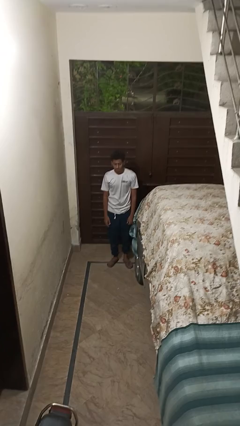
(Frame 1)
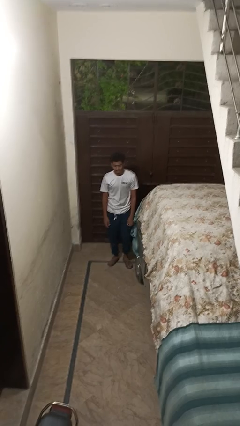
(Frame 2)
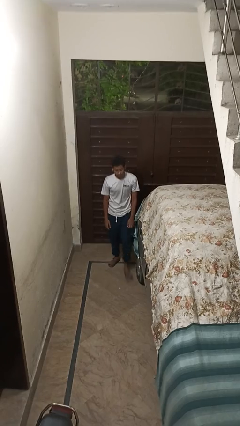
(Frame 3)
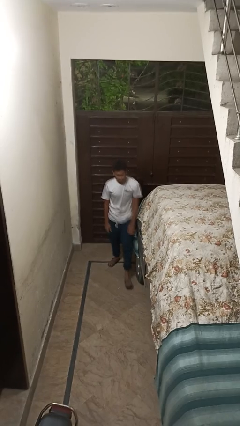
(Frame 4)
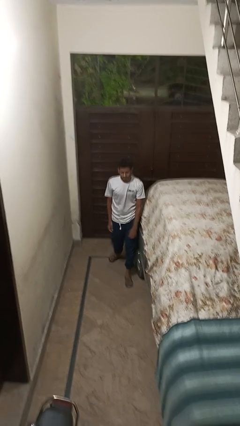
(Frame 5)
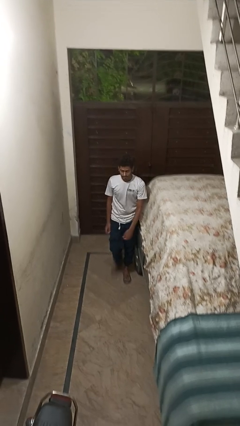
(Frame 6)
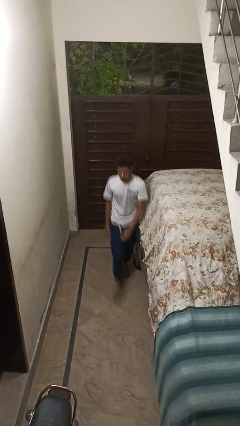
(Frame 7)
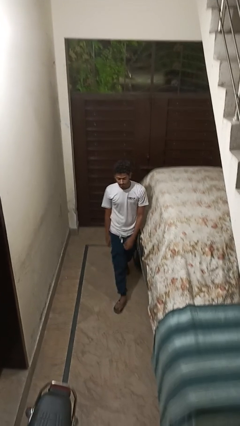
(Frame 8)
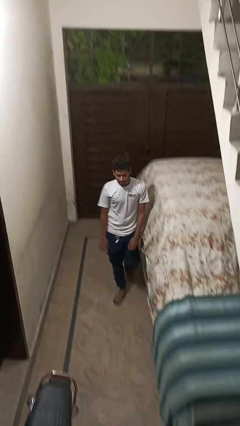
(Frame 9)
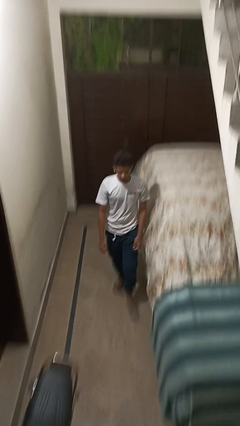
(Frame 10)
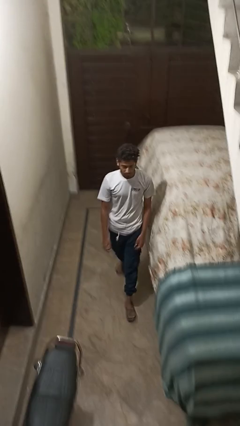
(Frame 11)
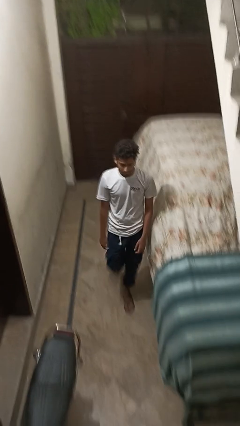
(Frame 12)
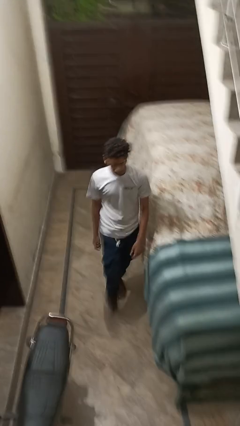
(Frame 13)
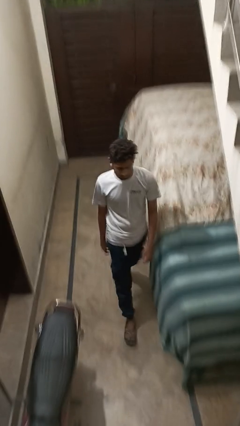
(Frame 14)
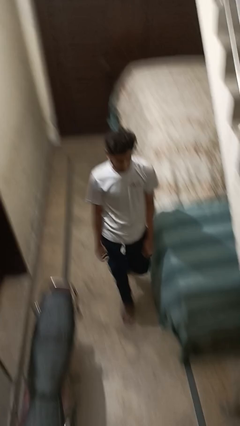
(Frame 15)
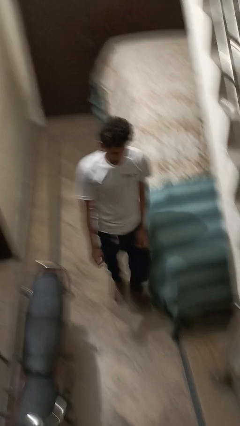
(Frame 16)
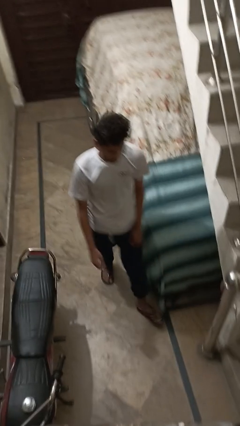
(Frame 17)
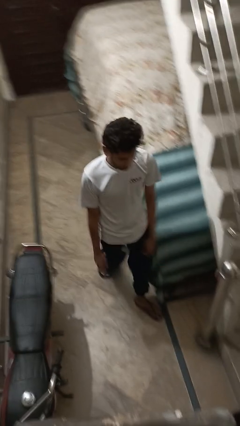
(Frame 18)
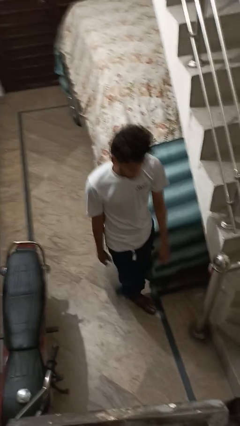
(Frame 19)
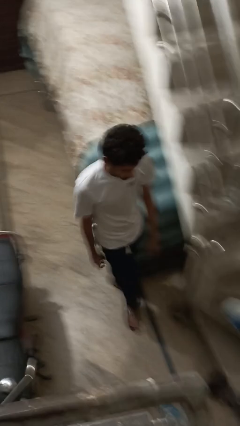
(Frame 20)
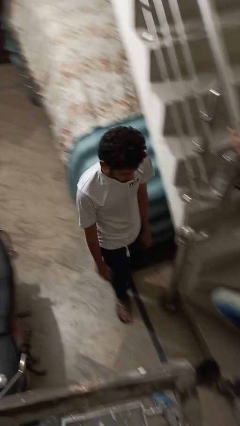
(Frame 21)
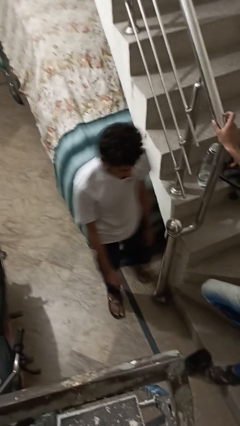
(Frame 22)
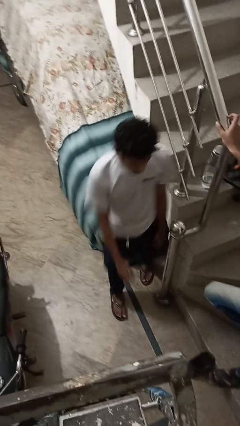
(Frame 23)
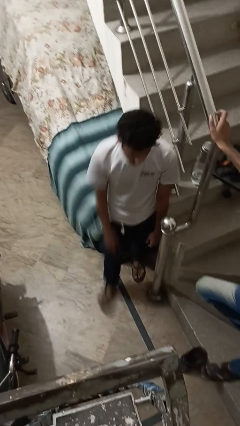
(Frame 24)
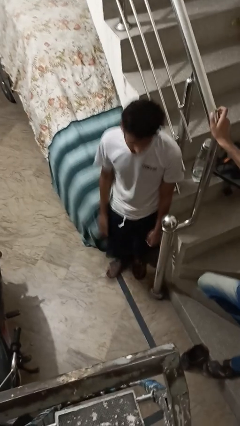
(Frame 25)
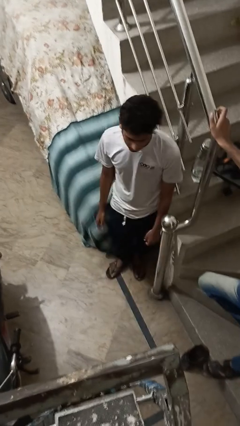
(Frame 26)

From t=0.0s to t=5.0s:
person walks around car

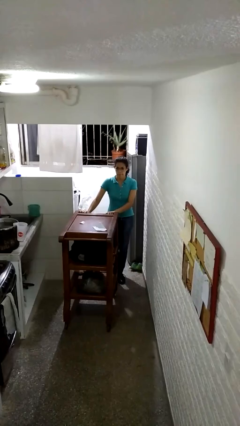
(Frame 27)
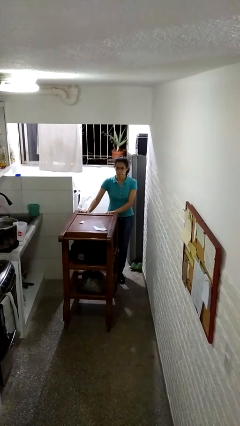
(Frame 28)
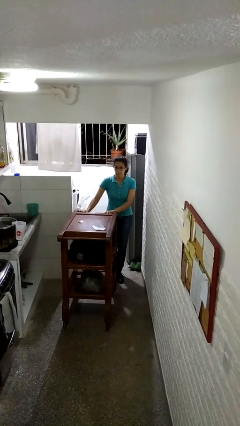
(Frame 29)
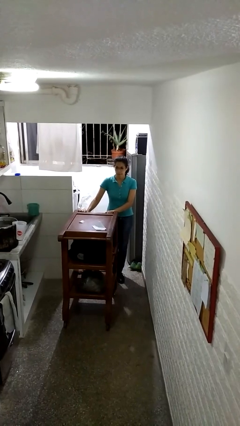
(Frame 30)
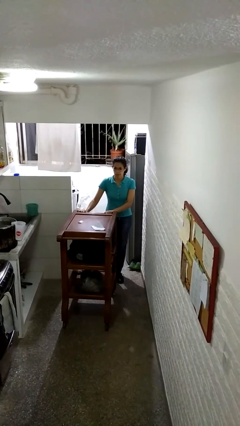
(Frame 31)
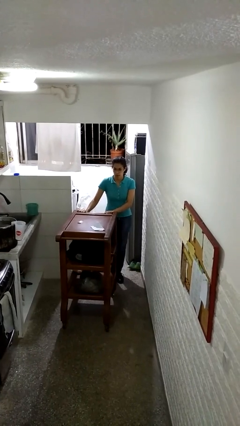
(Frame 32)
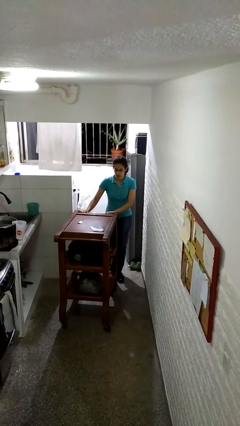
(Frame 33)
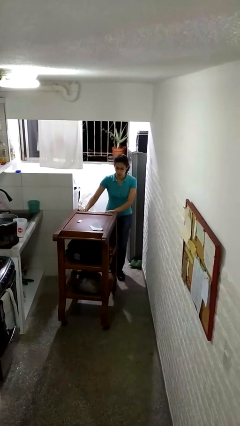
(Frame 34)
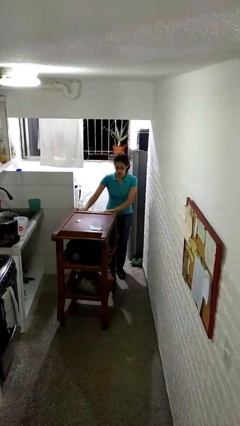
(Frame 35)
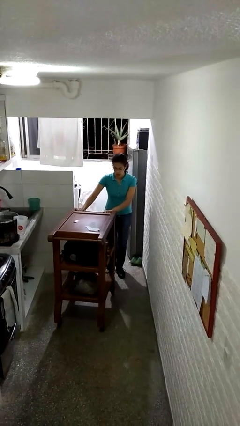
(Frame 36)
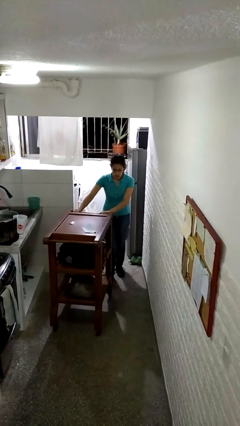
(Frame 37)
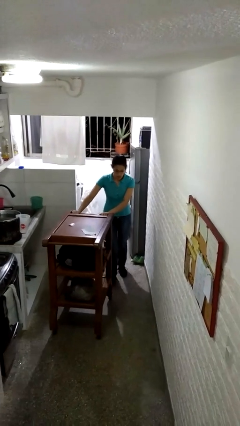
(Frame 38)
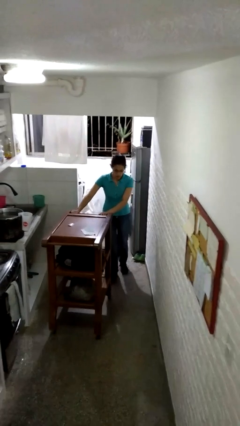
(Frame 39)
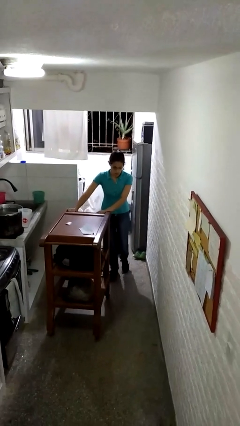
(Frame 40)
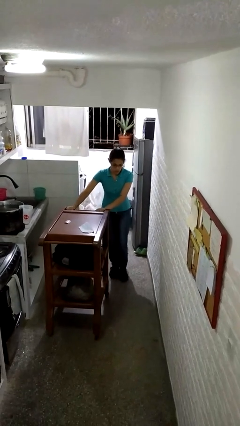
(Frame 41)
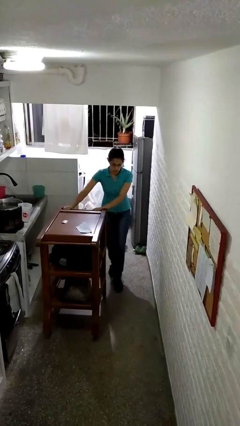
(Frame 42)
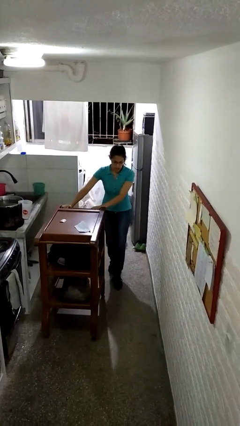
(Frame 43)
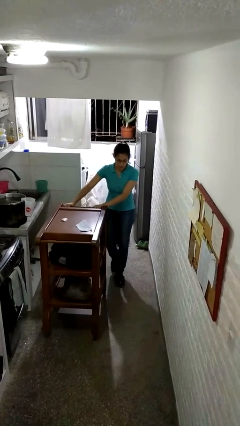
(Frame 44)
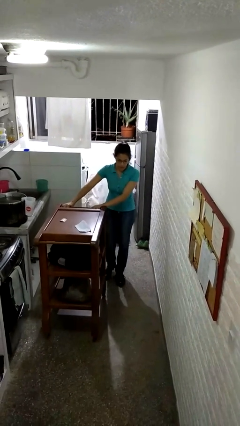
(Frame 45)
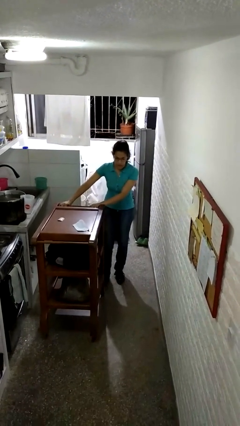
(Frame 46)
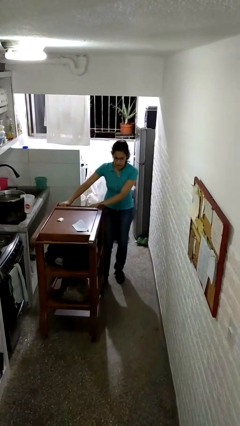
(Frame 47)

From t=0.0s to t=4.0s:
person pushes wheeled cart

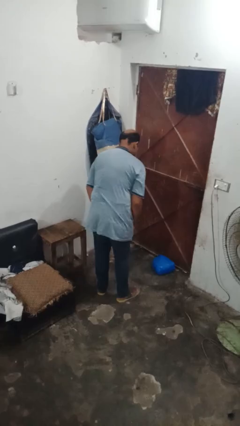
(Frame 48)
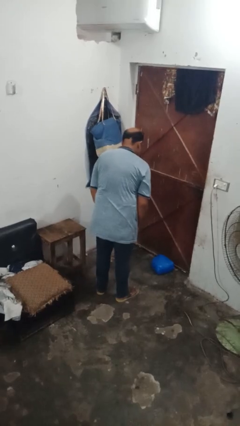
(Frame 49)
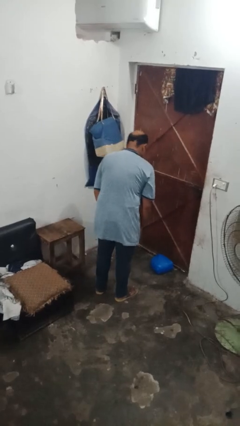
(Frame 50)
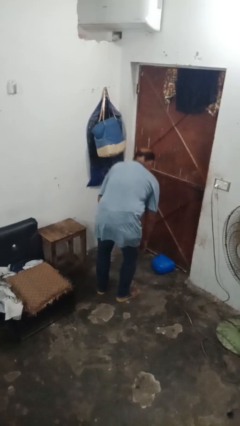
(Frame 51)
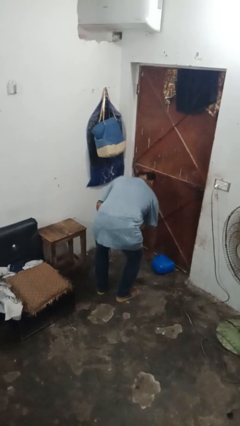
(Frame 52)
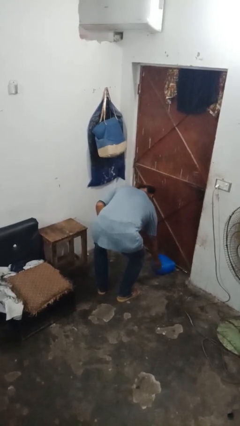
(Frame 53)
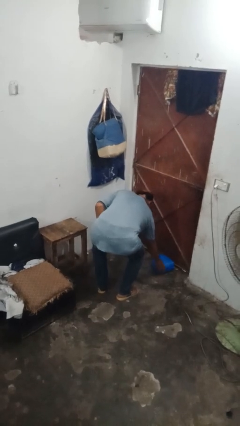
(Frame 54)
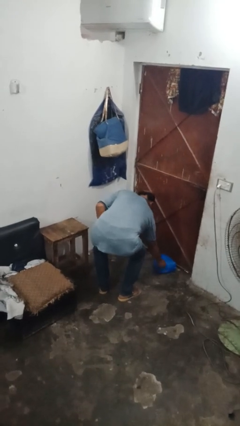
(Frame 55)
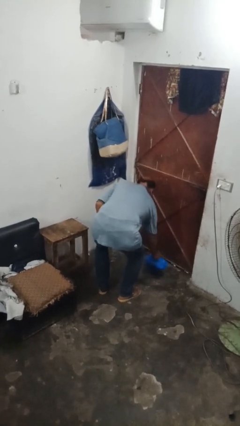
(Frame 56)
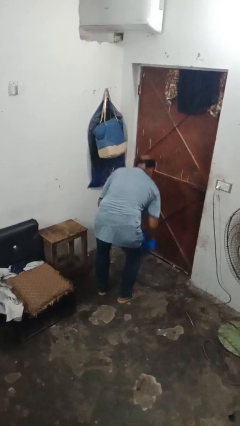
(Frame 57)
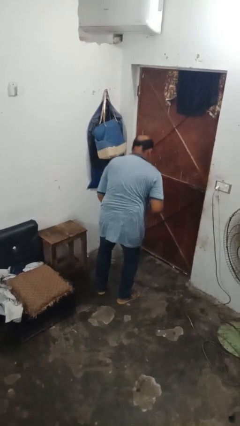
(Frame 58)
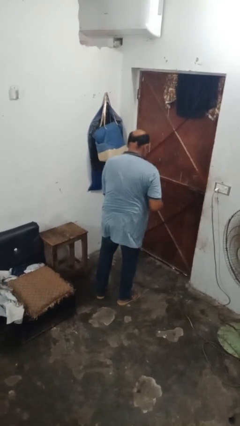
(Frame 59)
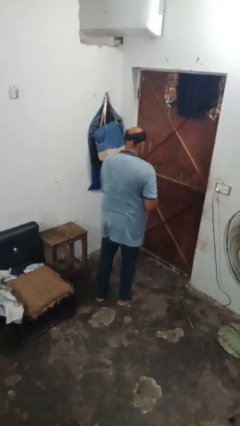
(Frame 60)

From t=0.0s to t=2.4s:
person picks up object from floor

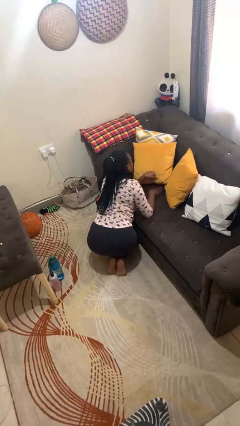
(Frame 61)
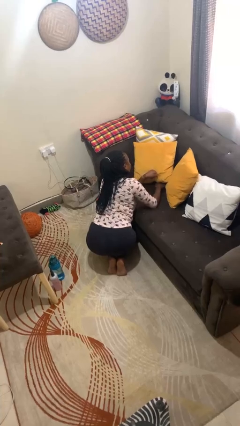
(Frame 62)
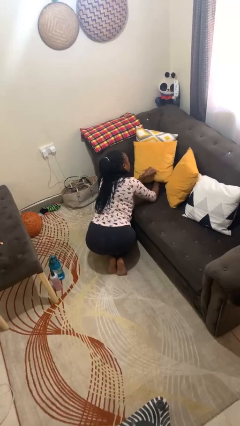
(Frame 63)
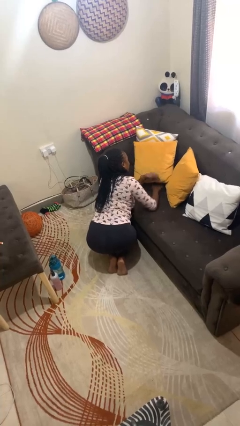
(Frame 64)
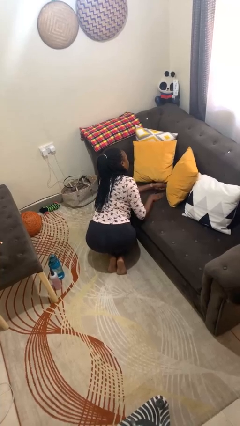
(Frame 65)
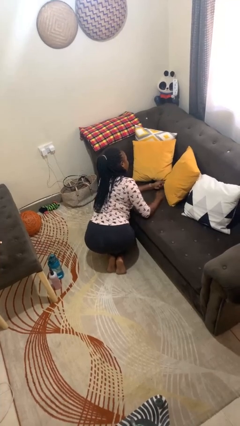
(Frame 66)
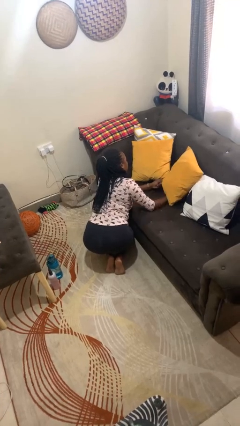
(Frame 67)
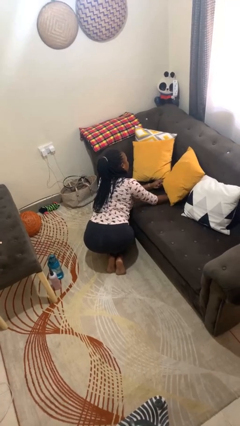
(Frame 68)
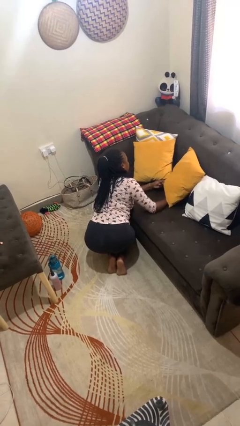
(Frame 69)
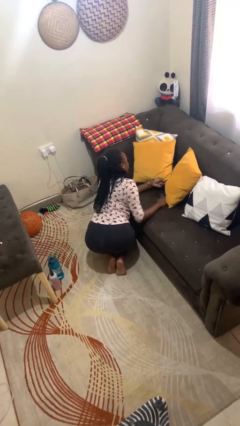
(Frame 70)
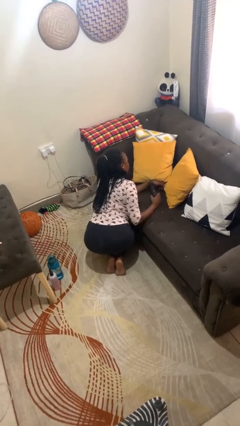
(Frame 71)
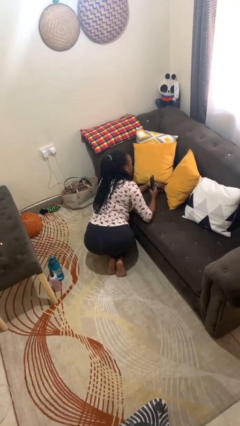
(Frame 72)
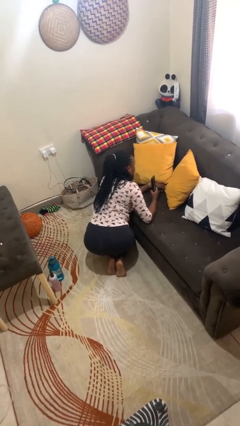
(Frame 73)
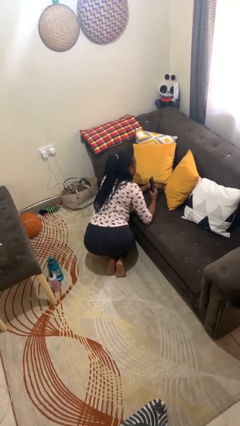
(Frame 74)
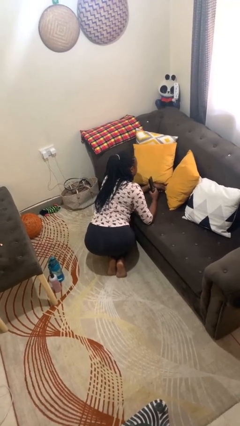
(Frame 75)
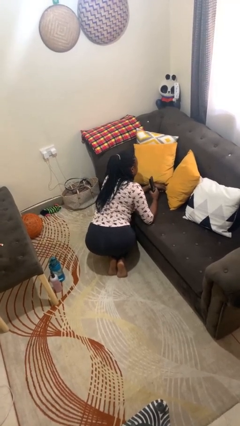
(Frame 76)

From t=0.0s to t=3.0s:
person searches in couch

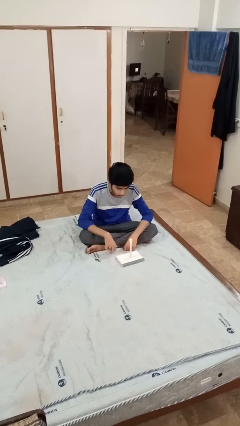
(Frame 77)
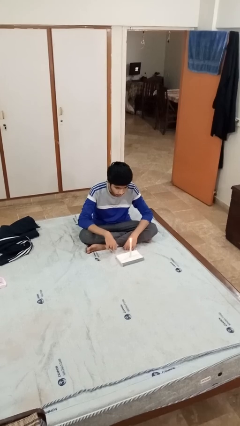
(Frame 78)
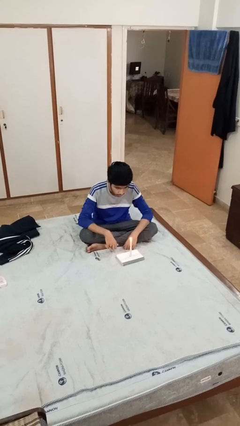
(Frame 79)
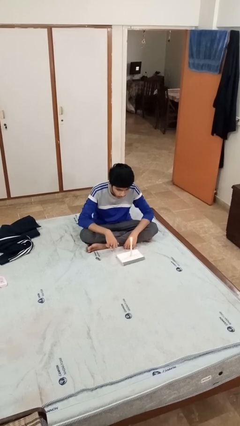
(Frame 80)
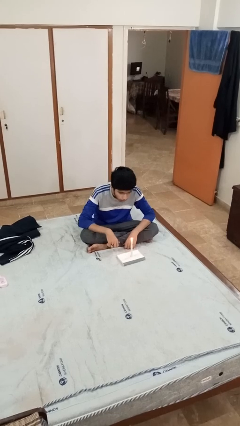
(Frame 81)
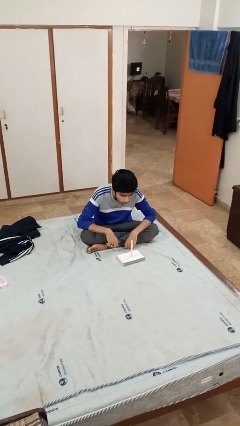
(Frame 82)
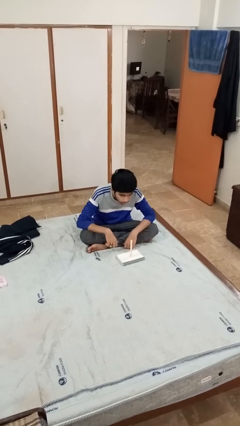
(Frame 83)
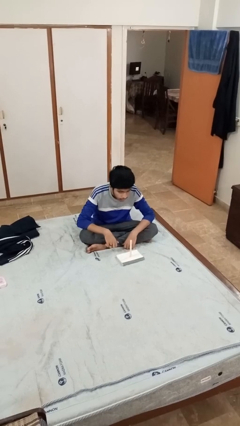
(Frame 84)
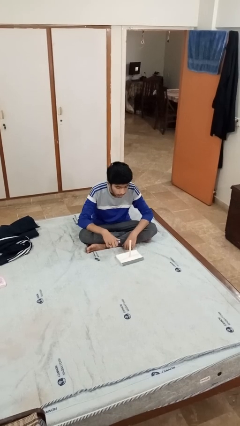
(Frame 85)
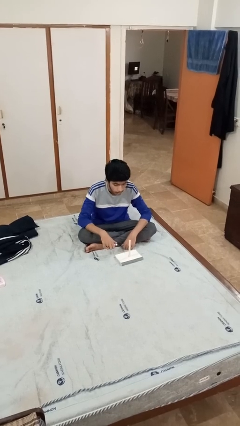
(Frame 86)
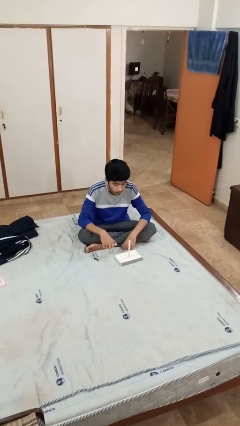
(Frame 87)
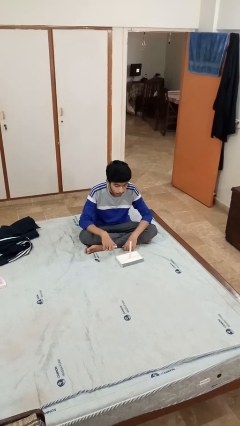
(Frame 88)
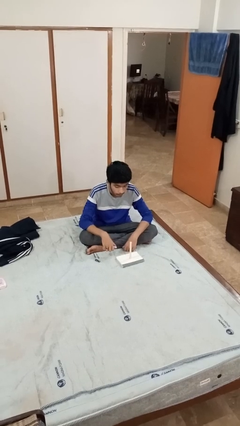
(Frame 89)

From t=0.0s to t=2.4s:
person extinguishes candle

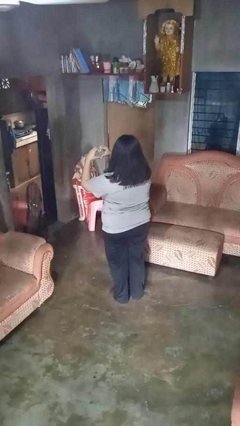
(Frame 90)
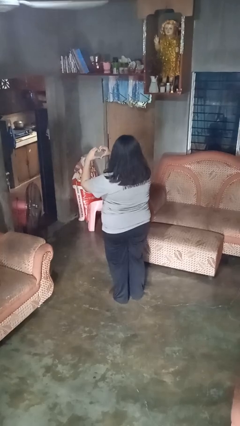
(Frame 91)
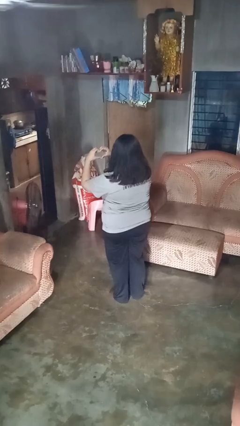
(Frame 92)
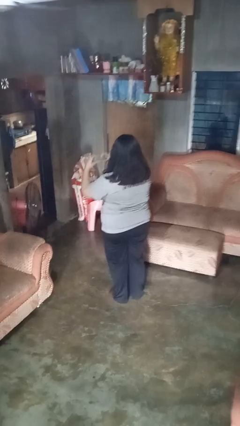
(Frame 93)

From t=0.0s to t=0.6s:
person gestures heart
